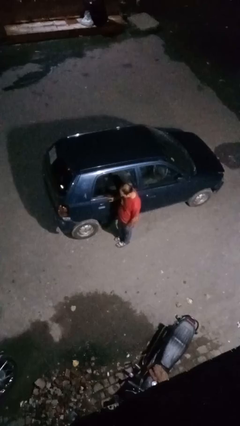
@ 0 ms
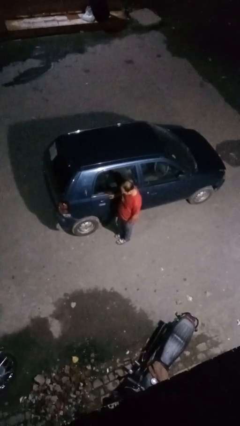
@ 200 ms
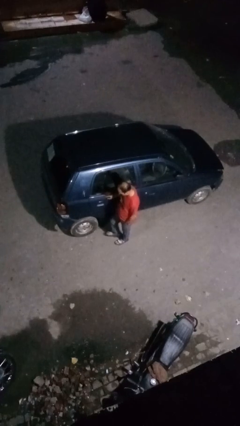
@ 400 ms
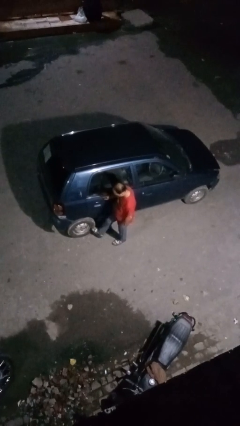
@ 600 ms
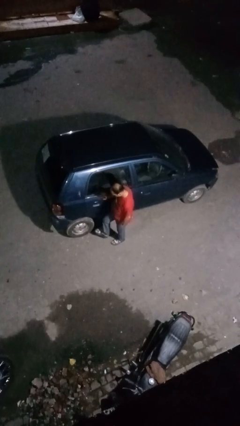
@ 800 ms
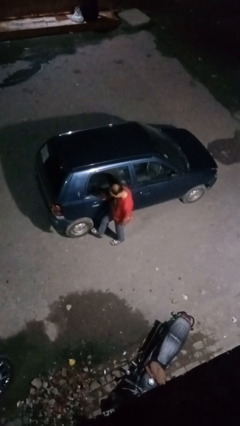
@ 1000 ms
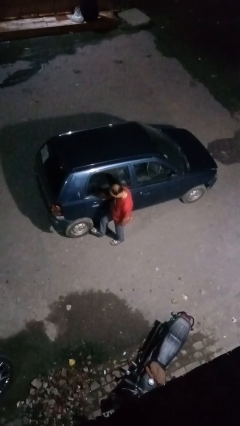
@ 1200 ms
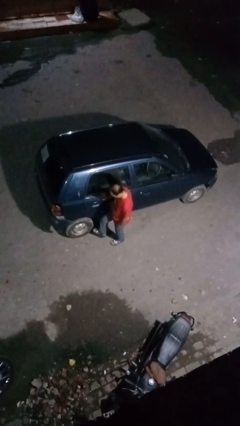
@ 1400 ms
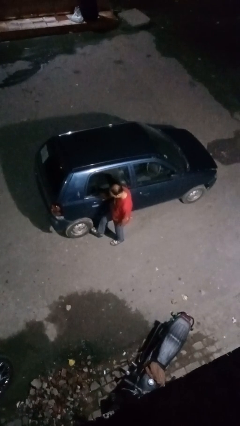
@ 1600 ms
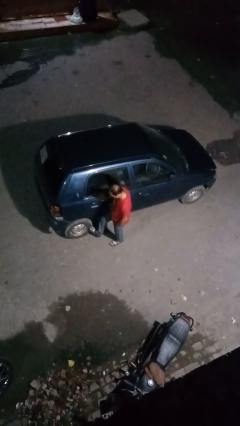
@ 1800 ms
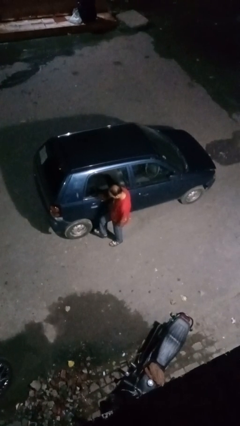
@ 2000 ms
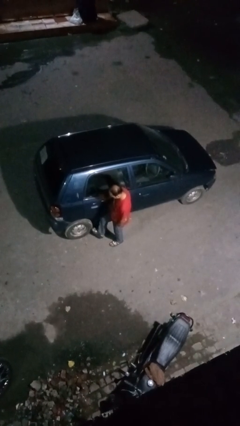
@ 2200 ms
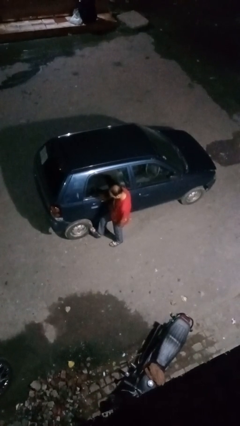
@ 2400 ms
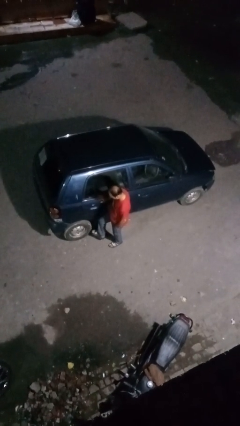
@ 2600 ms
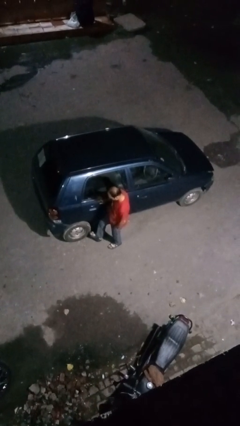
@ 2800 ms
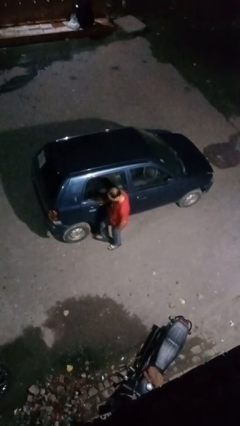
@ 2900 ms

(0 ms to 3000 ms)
person kicks car tires

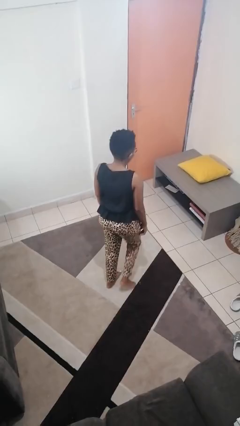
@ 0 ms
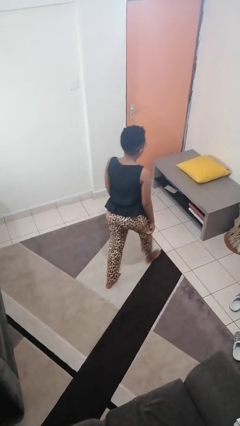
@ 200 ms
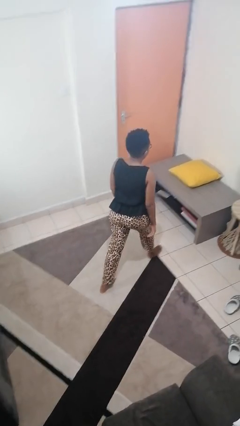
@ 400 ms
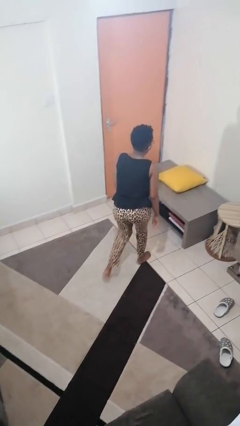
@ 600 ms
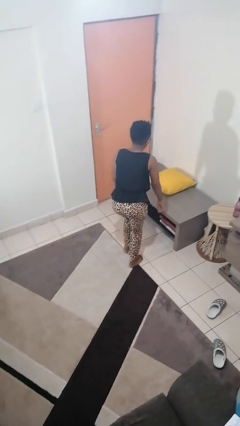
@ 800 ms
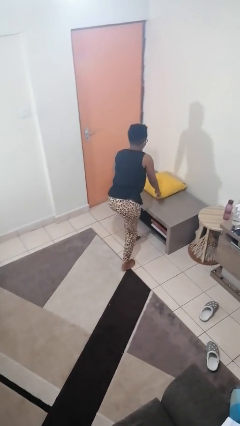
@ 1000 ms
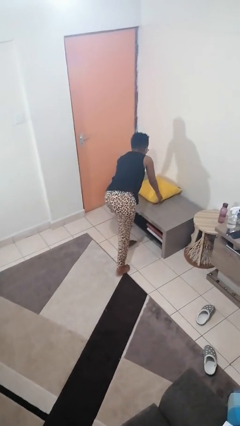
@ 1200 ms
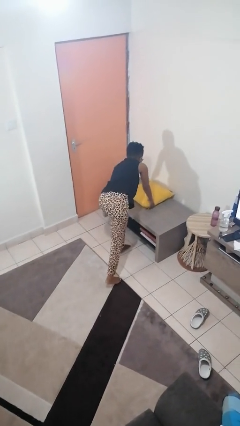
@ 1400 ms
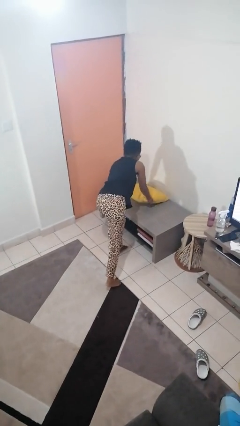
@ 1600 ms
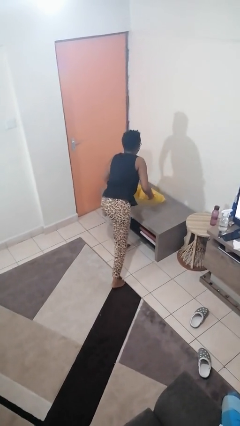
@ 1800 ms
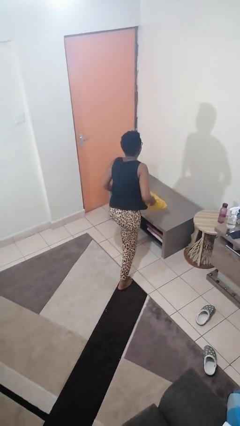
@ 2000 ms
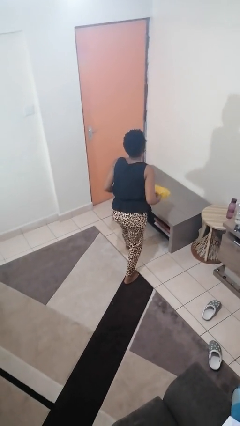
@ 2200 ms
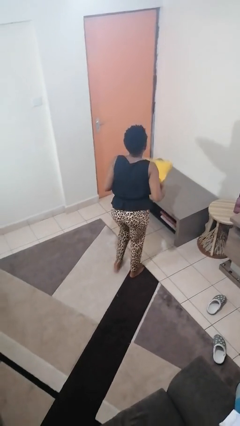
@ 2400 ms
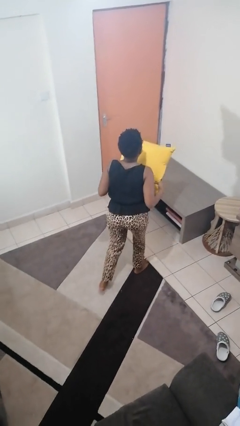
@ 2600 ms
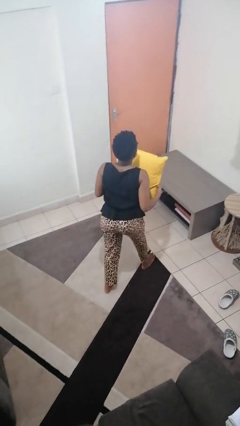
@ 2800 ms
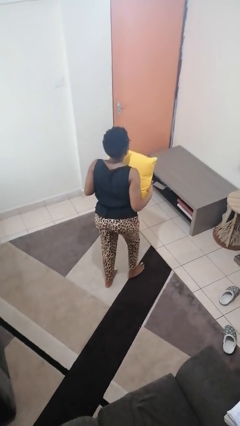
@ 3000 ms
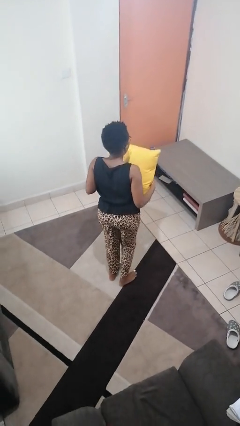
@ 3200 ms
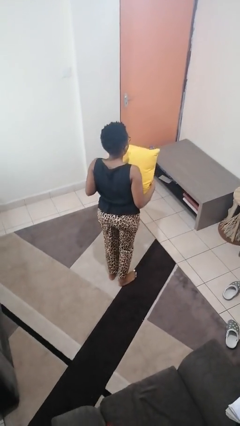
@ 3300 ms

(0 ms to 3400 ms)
person picks up object from table

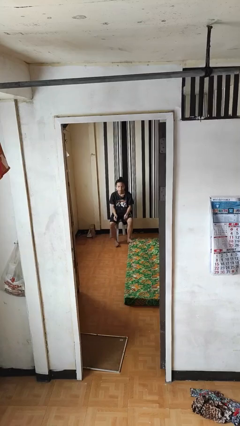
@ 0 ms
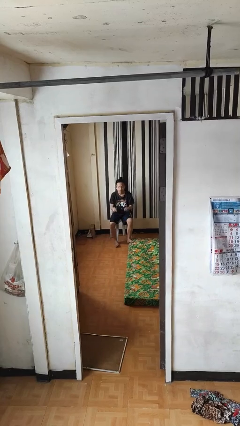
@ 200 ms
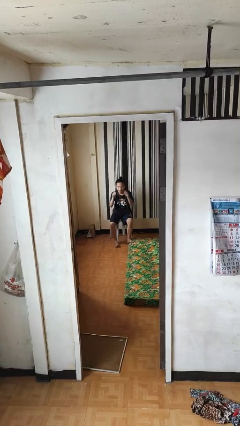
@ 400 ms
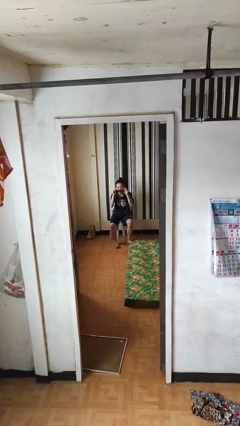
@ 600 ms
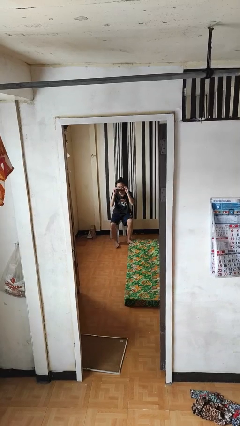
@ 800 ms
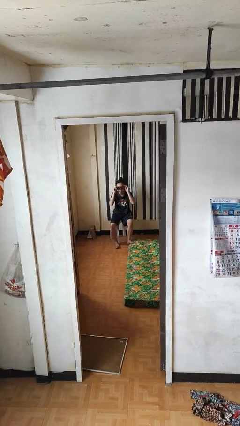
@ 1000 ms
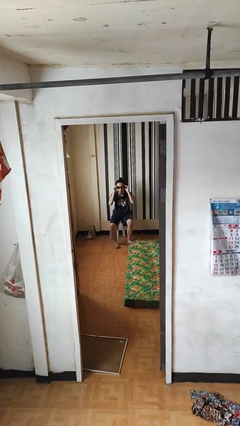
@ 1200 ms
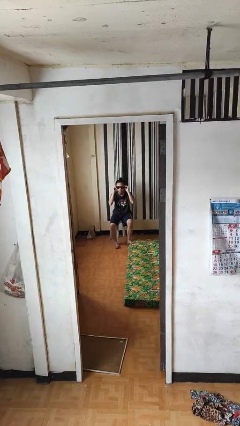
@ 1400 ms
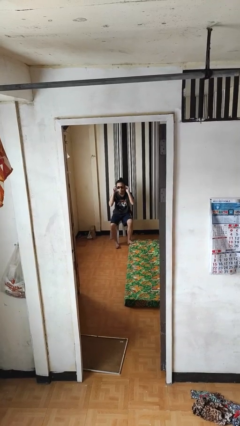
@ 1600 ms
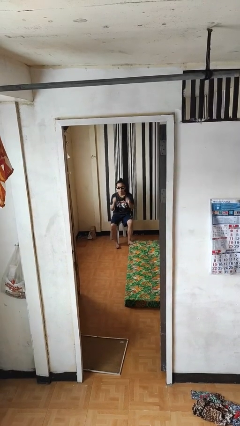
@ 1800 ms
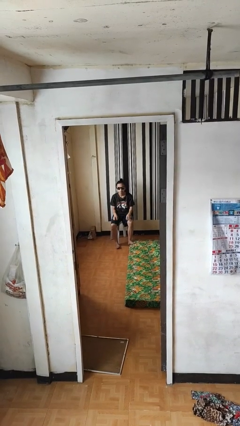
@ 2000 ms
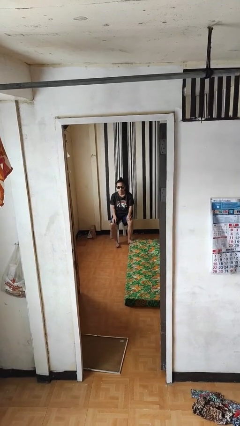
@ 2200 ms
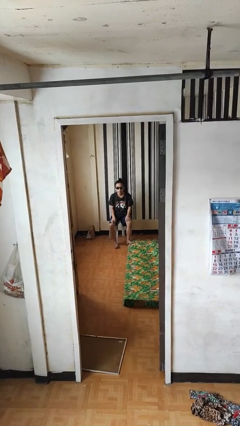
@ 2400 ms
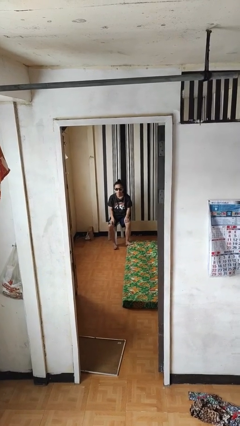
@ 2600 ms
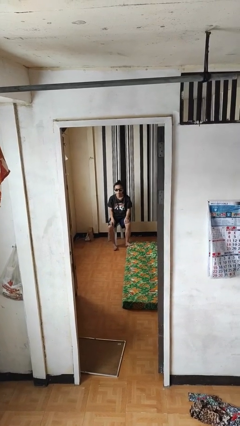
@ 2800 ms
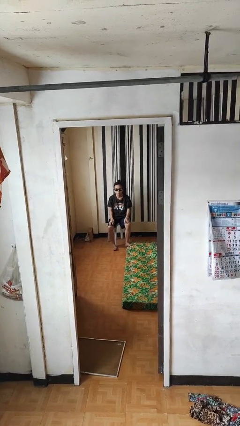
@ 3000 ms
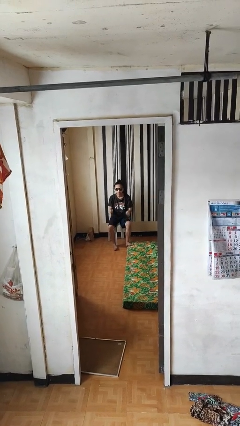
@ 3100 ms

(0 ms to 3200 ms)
person puts on sunglasses

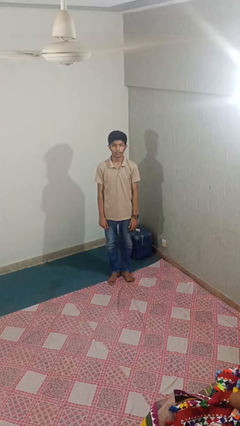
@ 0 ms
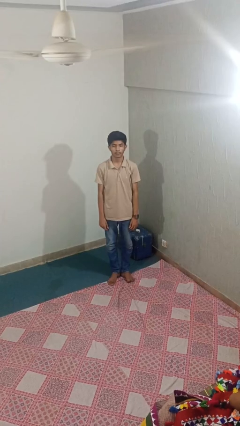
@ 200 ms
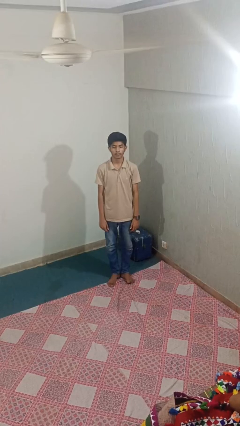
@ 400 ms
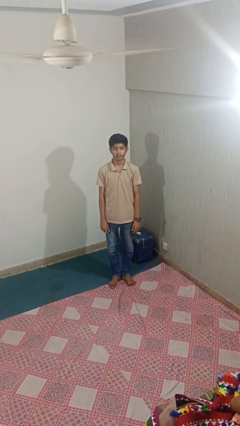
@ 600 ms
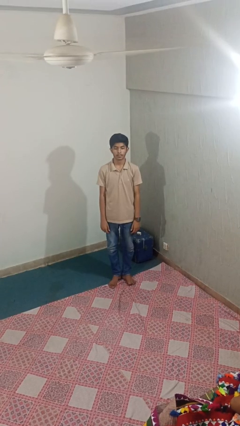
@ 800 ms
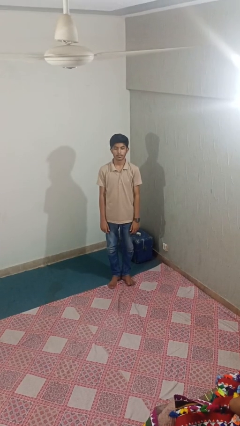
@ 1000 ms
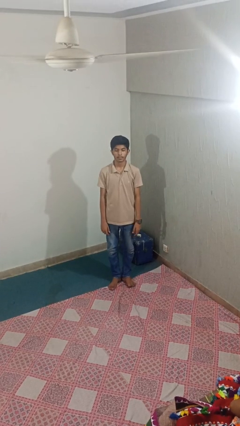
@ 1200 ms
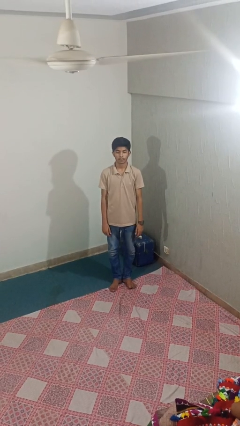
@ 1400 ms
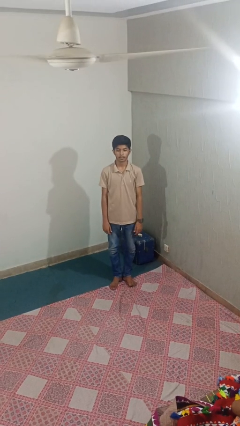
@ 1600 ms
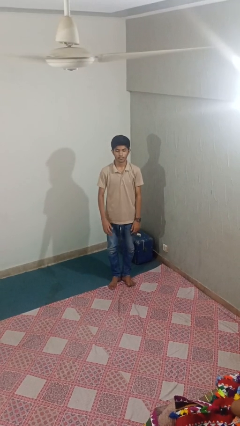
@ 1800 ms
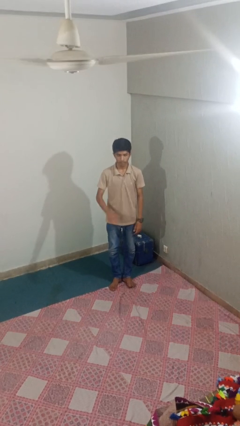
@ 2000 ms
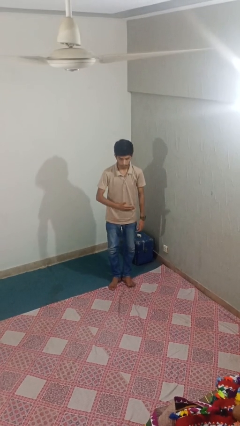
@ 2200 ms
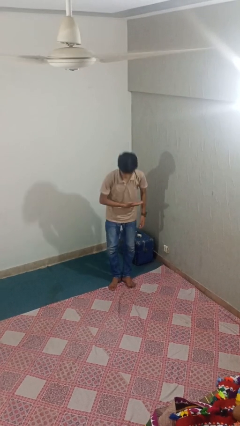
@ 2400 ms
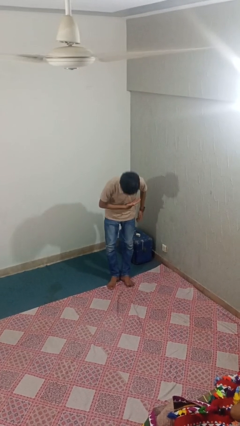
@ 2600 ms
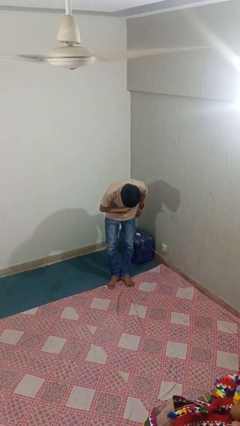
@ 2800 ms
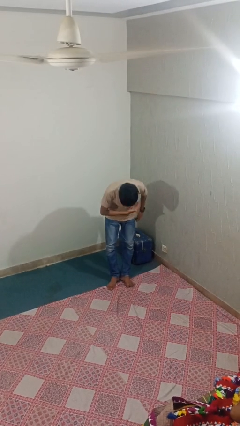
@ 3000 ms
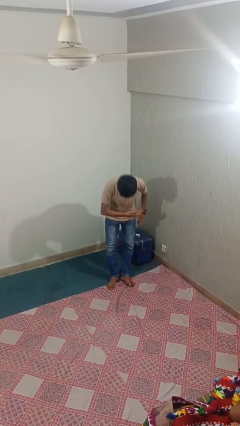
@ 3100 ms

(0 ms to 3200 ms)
person bows

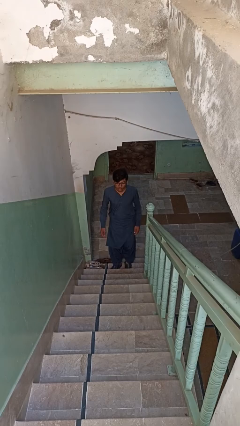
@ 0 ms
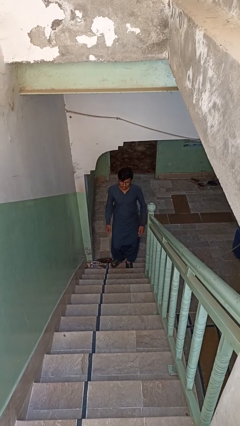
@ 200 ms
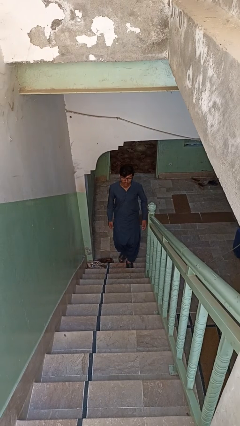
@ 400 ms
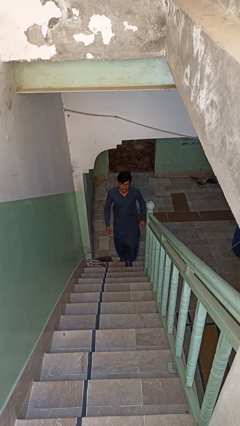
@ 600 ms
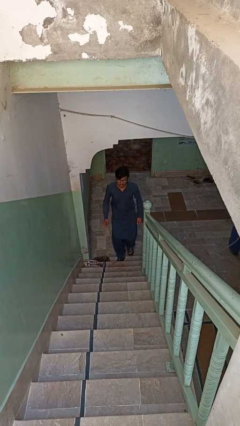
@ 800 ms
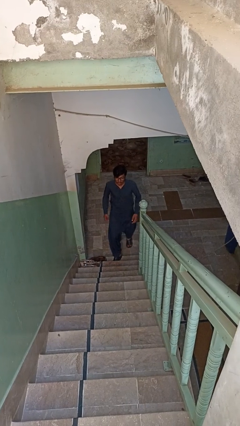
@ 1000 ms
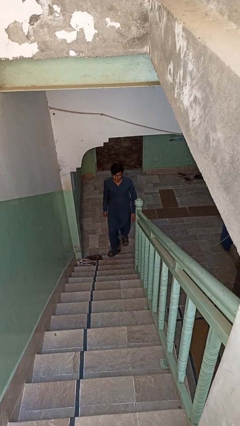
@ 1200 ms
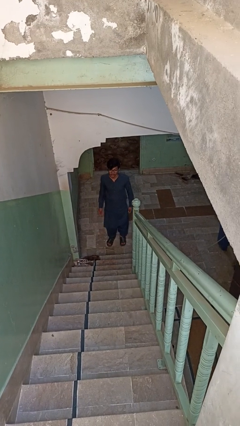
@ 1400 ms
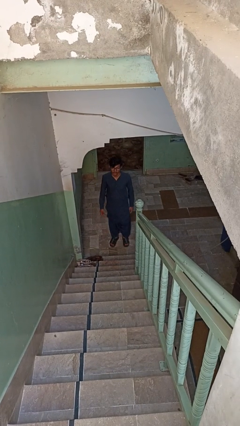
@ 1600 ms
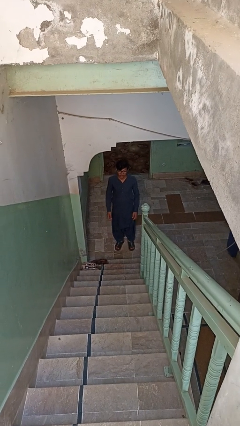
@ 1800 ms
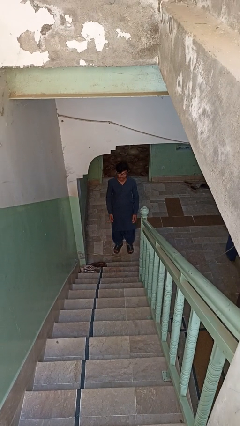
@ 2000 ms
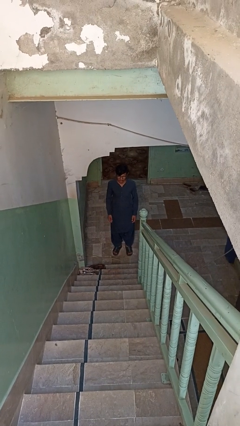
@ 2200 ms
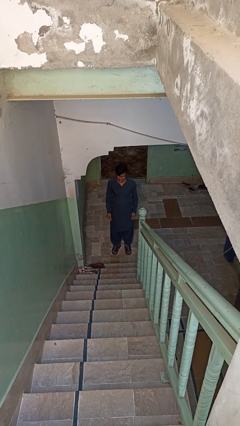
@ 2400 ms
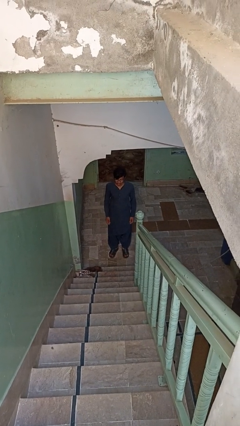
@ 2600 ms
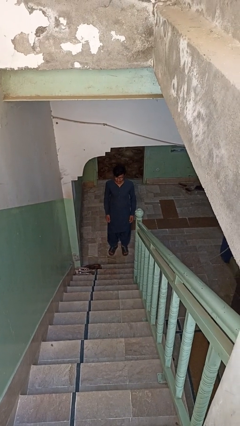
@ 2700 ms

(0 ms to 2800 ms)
person climbs down stairs

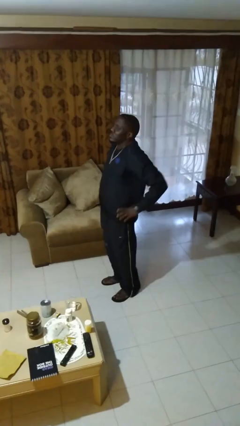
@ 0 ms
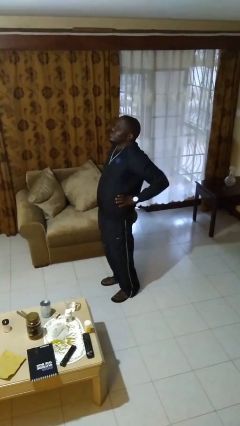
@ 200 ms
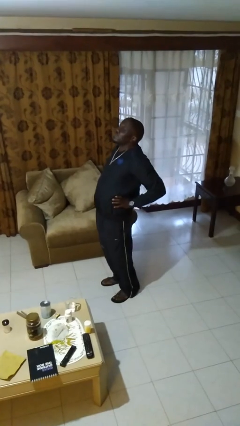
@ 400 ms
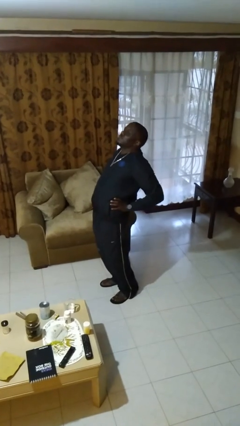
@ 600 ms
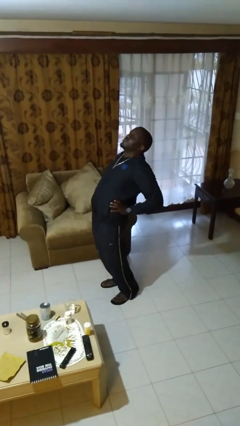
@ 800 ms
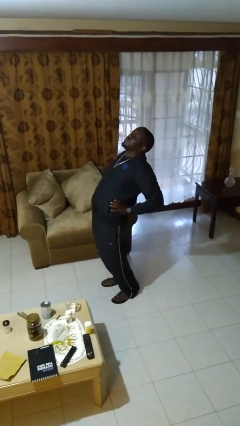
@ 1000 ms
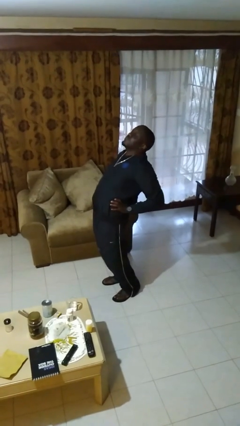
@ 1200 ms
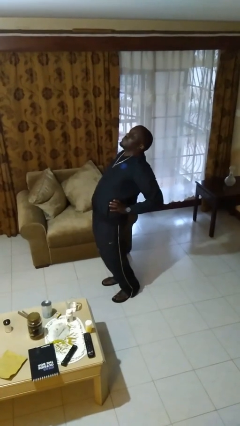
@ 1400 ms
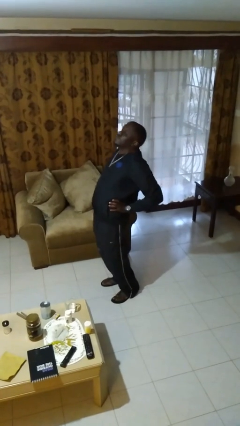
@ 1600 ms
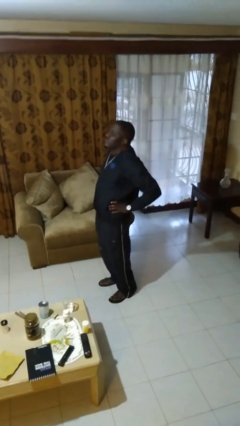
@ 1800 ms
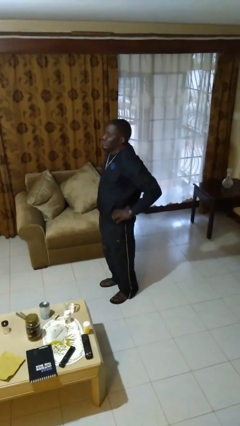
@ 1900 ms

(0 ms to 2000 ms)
person stretches back
